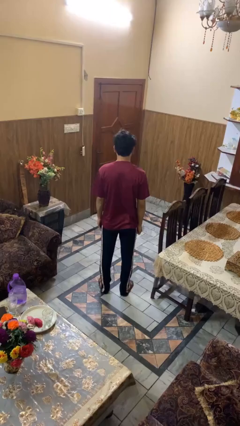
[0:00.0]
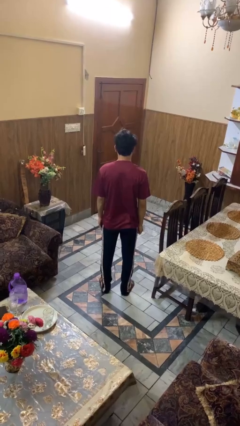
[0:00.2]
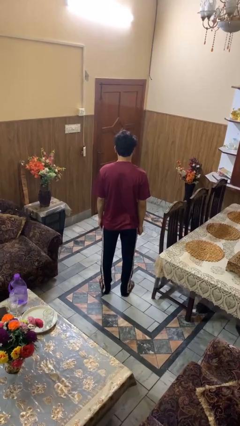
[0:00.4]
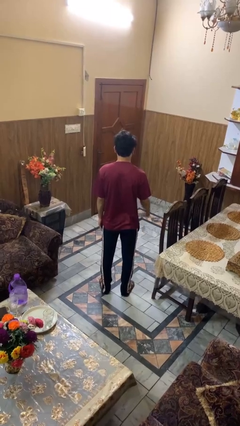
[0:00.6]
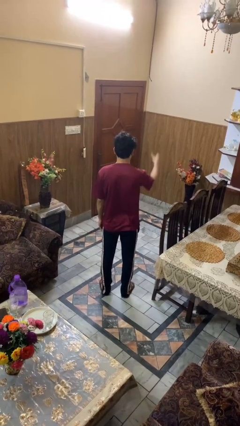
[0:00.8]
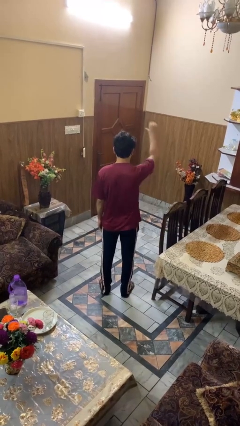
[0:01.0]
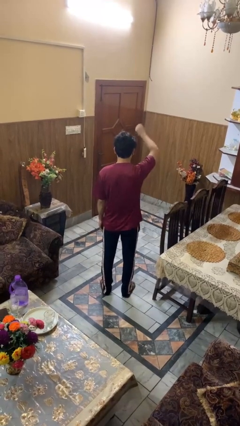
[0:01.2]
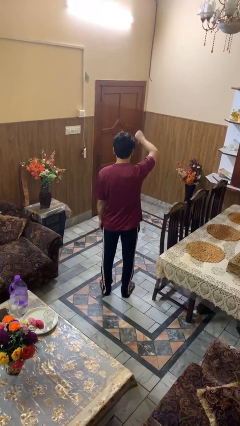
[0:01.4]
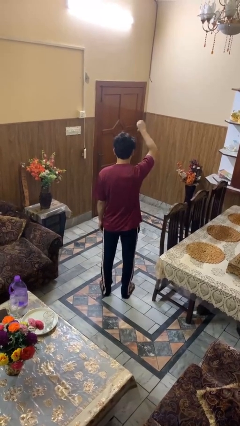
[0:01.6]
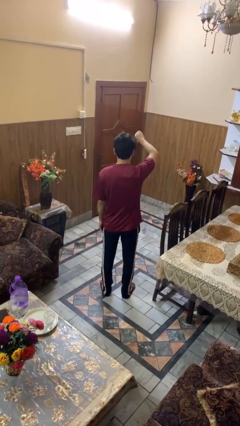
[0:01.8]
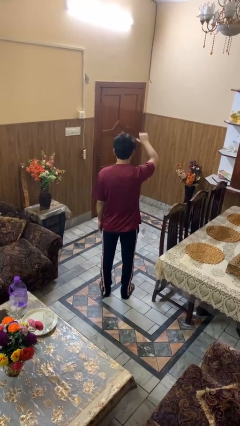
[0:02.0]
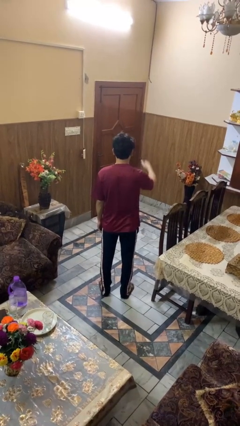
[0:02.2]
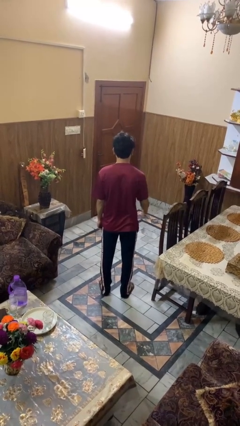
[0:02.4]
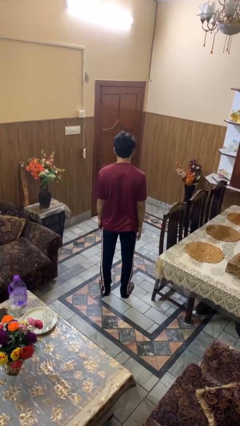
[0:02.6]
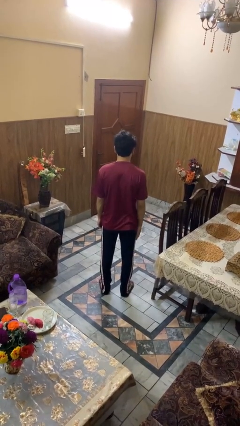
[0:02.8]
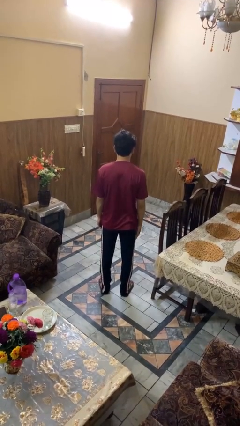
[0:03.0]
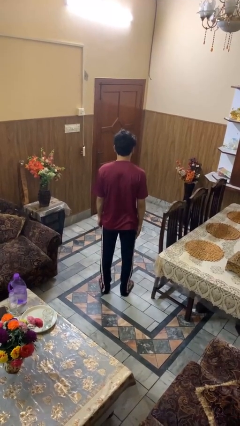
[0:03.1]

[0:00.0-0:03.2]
person gestures thumbs down

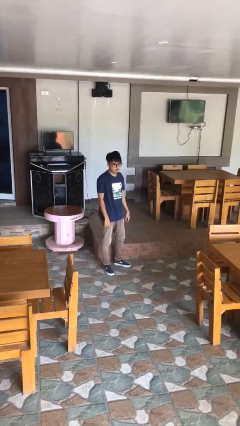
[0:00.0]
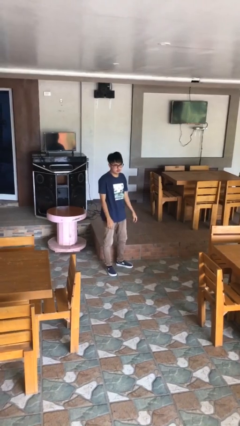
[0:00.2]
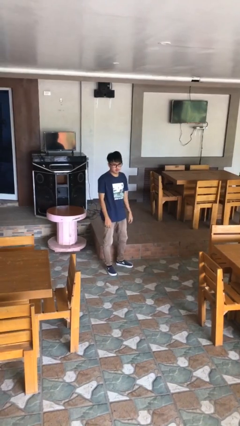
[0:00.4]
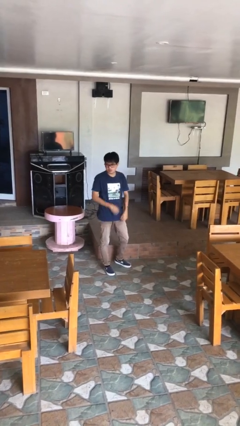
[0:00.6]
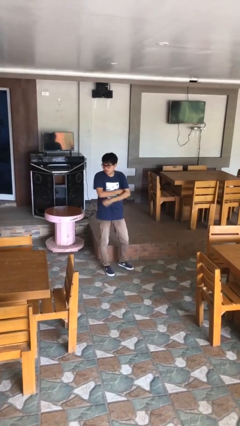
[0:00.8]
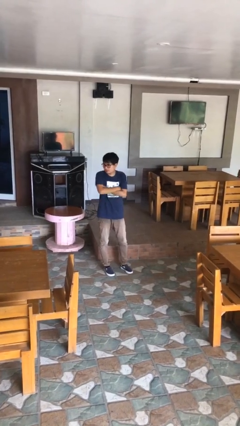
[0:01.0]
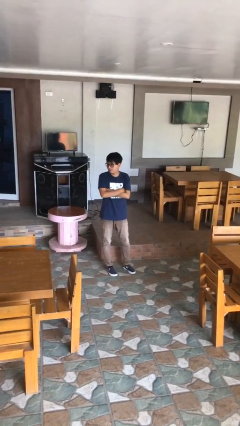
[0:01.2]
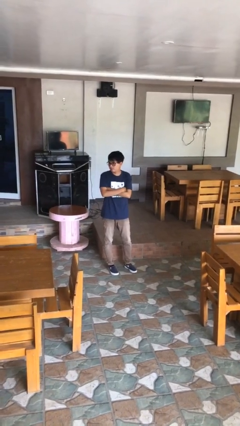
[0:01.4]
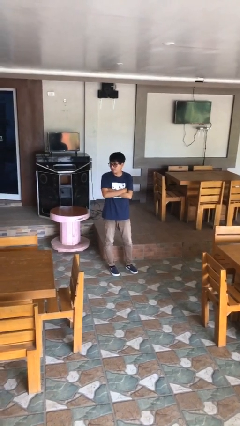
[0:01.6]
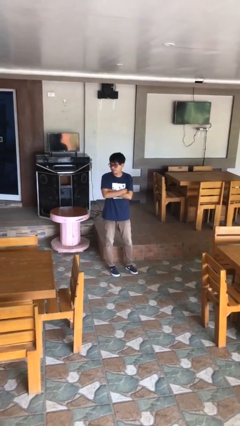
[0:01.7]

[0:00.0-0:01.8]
person crosses arms

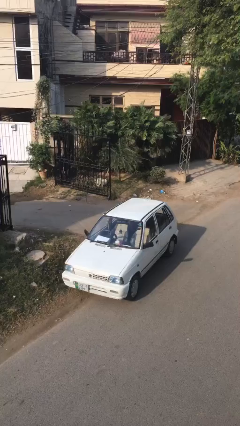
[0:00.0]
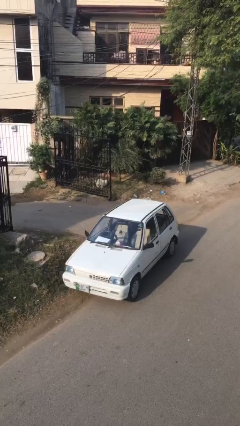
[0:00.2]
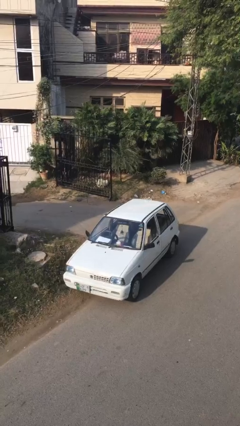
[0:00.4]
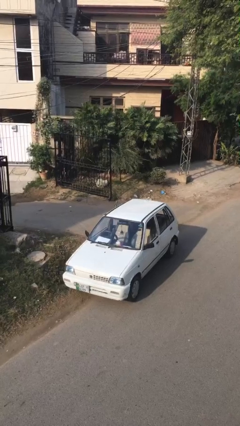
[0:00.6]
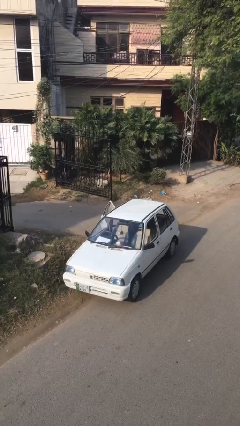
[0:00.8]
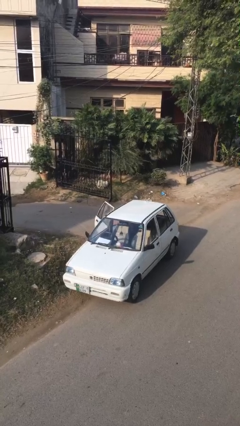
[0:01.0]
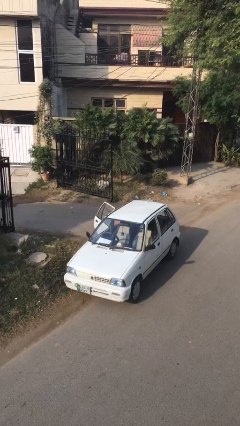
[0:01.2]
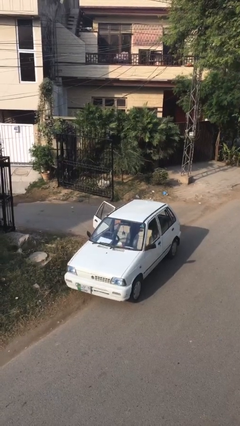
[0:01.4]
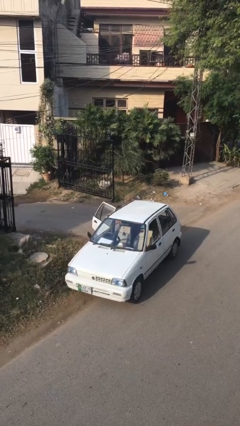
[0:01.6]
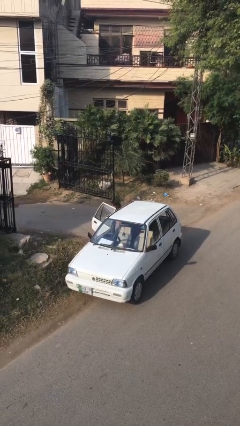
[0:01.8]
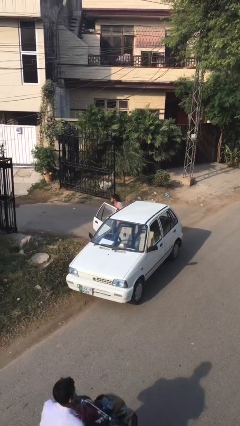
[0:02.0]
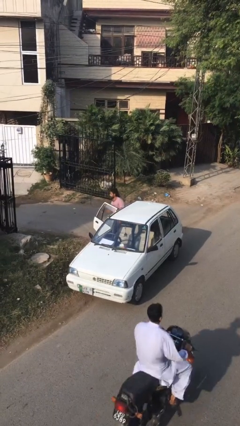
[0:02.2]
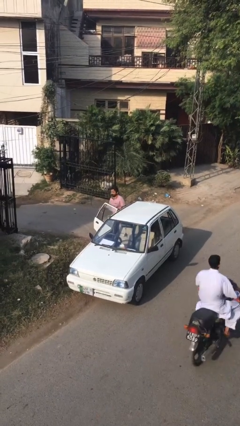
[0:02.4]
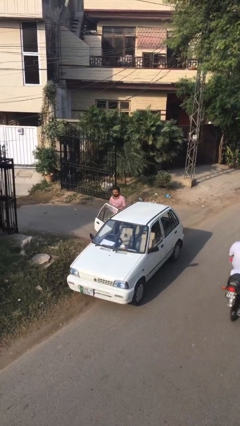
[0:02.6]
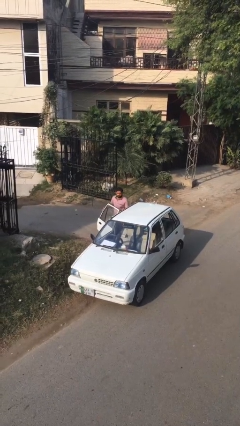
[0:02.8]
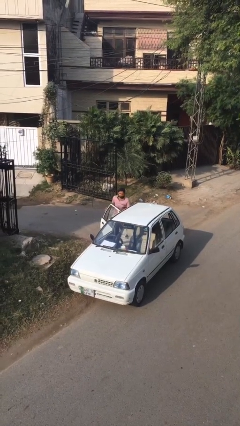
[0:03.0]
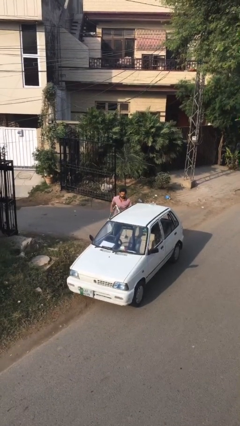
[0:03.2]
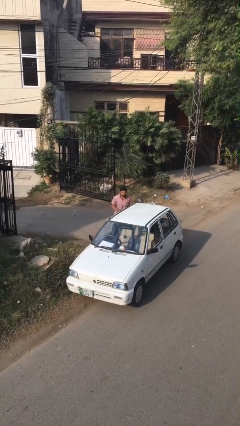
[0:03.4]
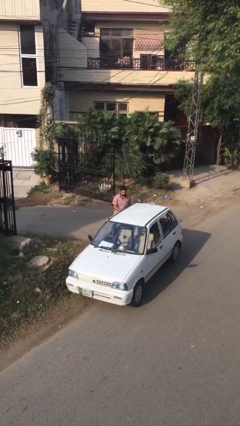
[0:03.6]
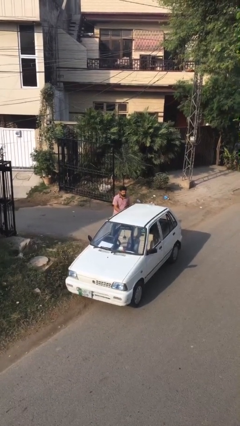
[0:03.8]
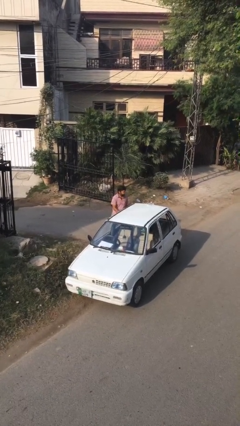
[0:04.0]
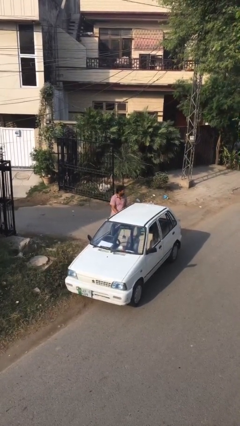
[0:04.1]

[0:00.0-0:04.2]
person exits car

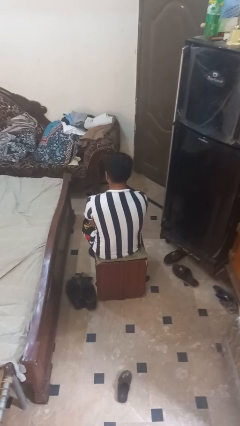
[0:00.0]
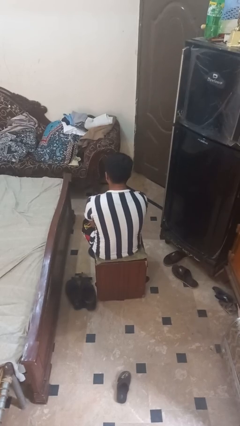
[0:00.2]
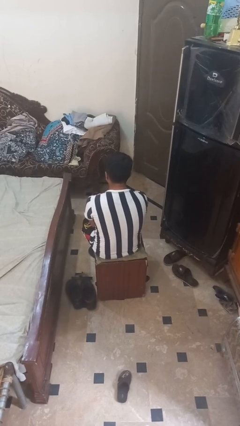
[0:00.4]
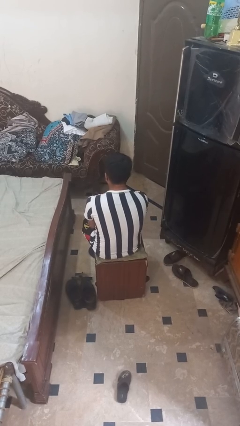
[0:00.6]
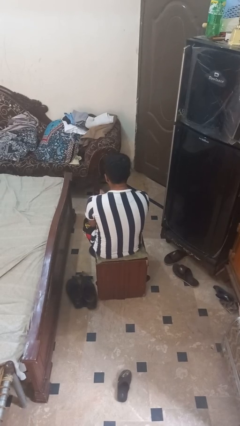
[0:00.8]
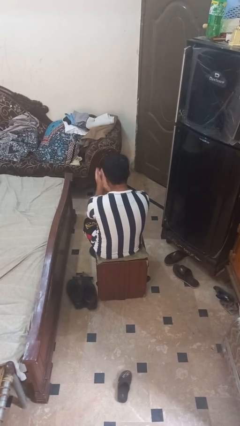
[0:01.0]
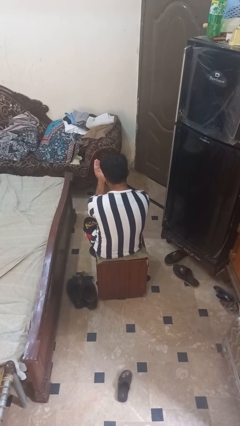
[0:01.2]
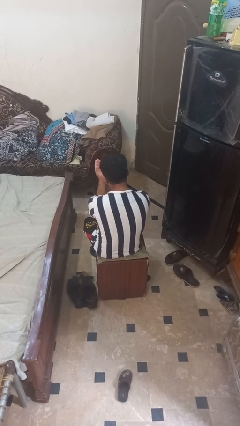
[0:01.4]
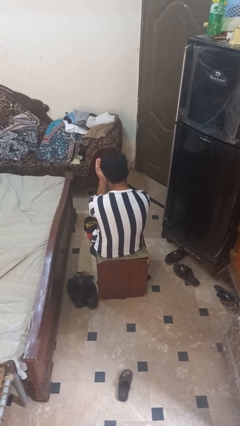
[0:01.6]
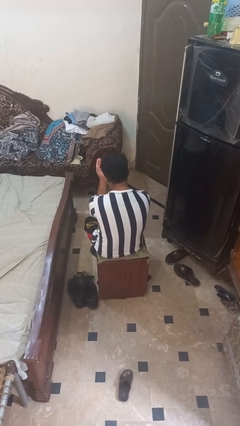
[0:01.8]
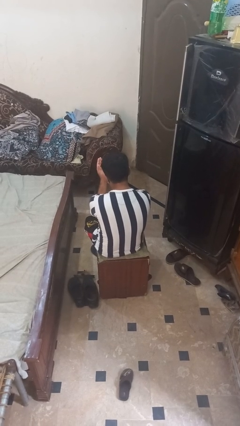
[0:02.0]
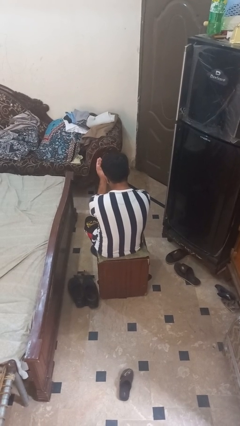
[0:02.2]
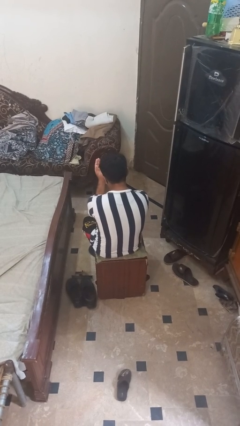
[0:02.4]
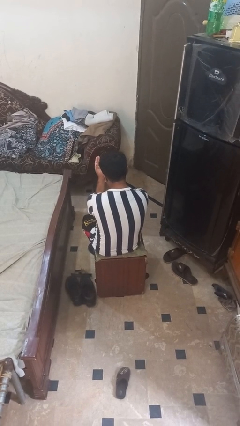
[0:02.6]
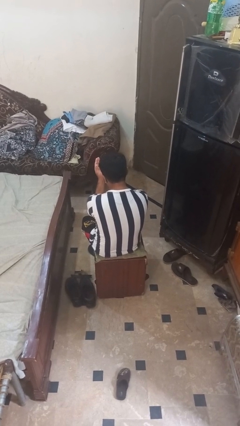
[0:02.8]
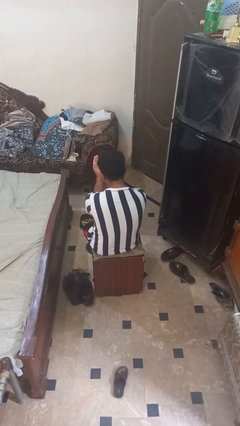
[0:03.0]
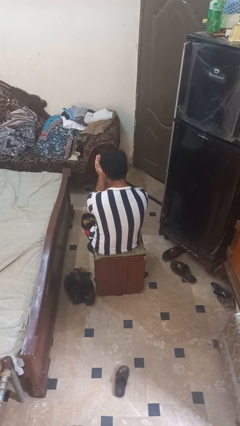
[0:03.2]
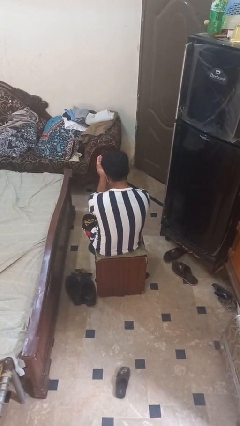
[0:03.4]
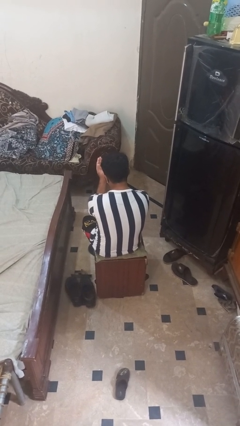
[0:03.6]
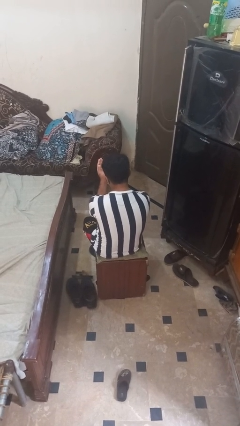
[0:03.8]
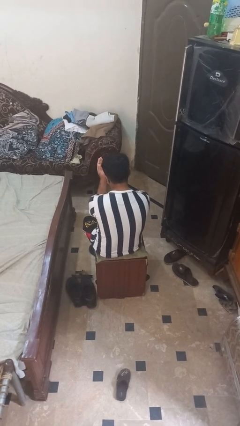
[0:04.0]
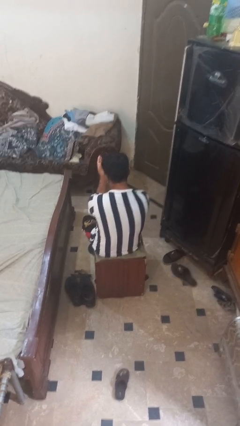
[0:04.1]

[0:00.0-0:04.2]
person prays

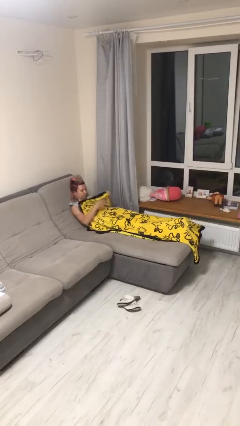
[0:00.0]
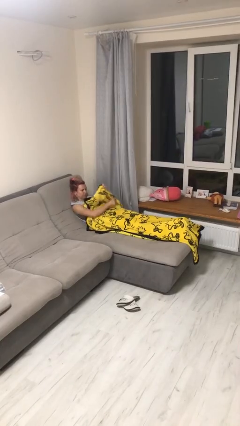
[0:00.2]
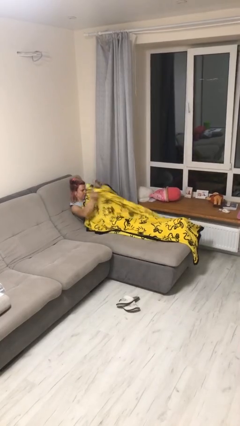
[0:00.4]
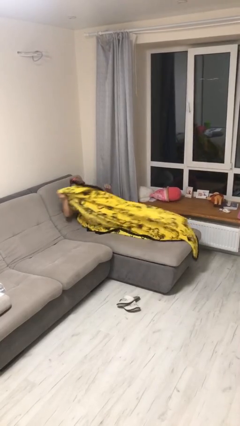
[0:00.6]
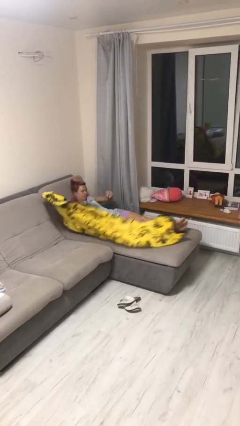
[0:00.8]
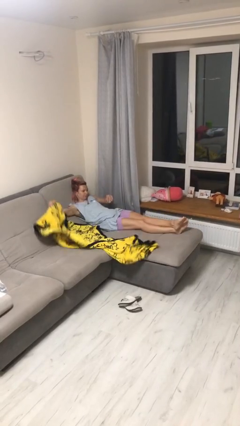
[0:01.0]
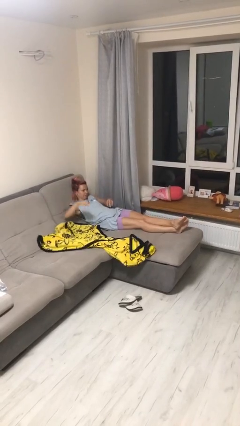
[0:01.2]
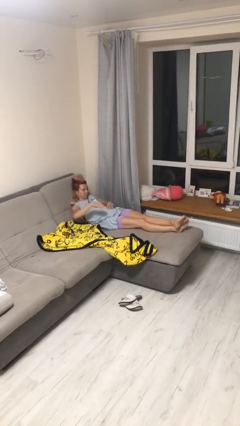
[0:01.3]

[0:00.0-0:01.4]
person uncovers with blanket

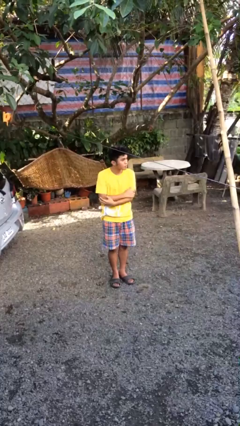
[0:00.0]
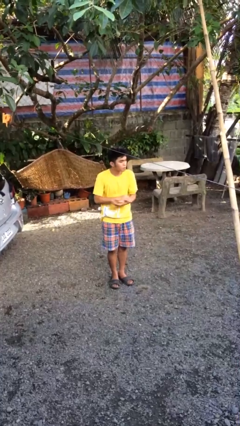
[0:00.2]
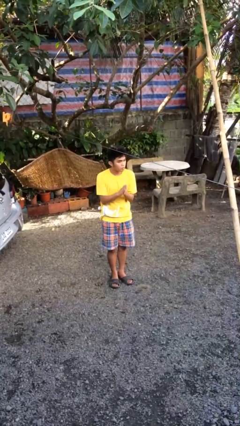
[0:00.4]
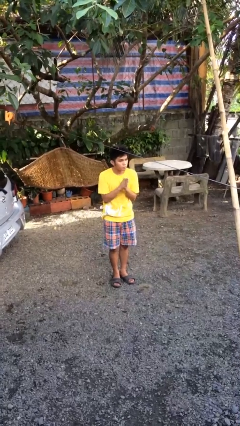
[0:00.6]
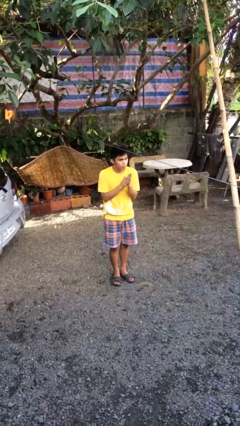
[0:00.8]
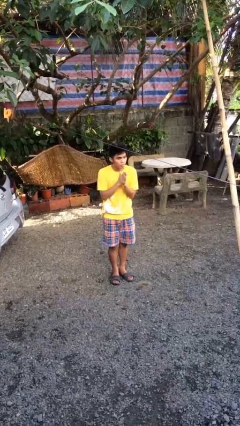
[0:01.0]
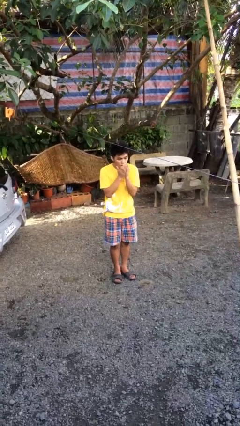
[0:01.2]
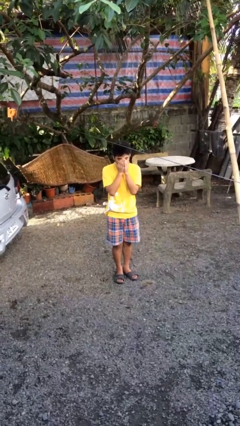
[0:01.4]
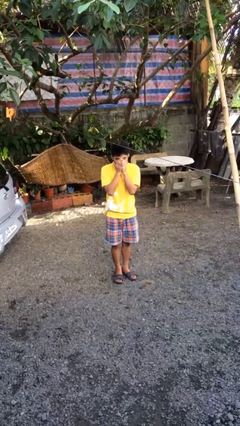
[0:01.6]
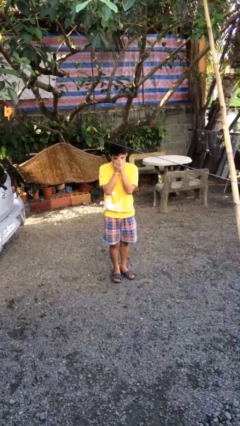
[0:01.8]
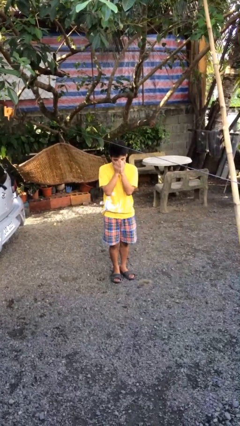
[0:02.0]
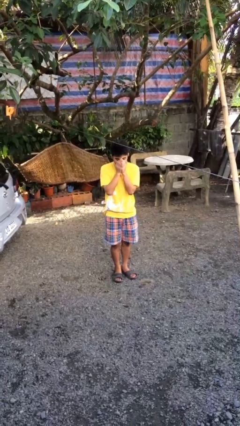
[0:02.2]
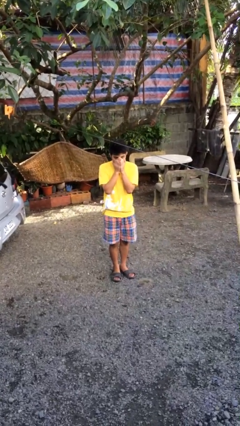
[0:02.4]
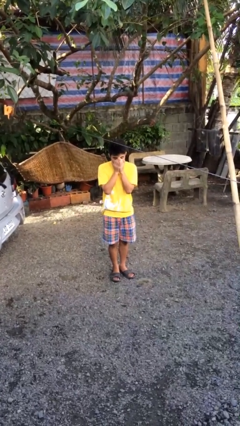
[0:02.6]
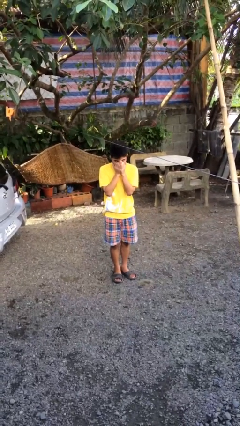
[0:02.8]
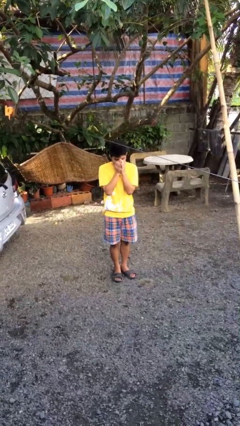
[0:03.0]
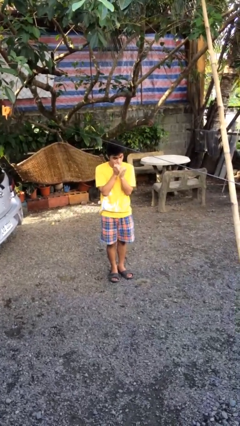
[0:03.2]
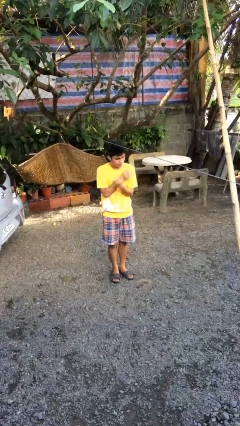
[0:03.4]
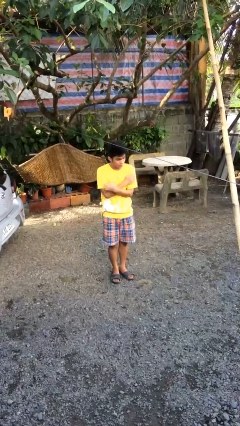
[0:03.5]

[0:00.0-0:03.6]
person blows into hands
